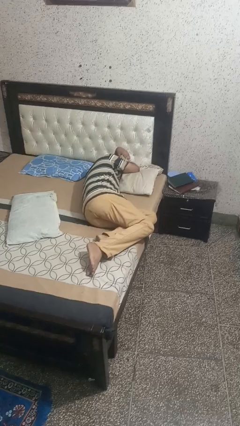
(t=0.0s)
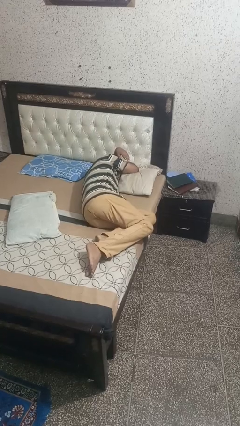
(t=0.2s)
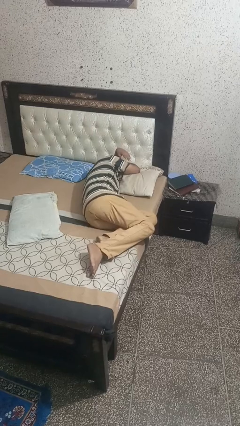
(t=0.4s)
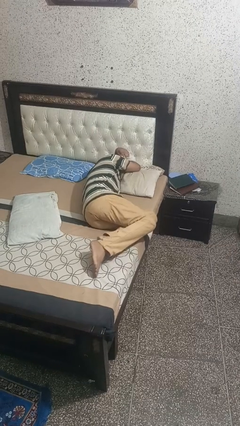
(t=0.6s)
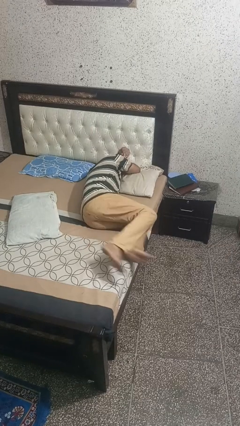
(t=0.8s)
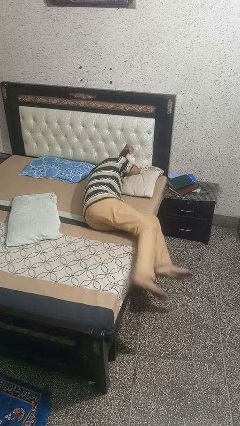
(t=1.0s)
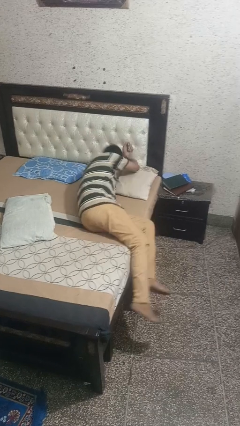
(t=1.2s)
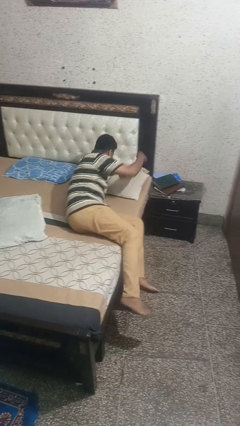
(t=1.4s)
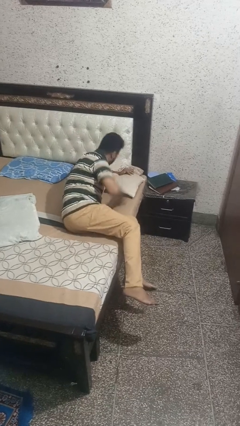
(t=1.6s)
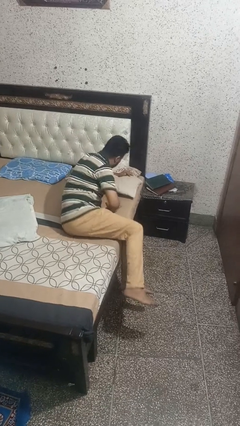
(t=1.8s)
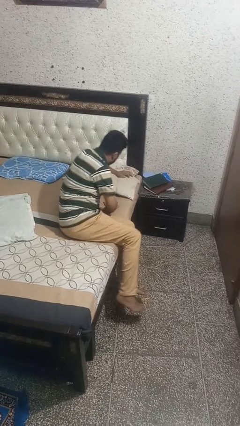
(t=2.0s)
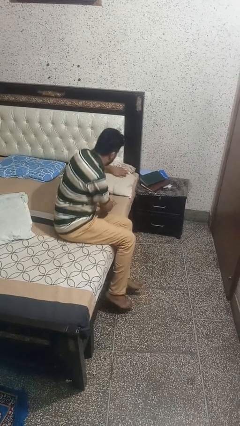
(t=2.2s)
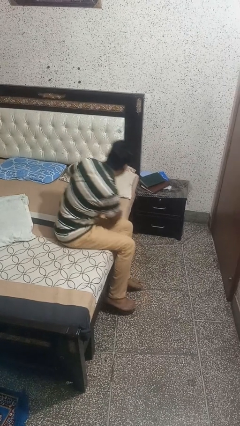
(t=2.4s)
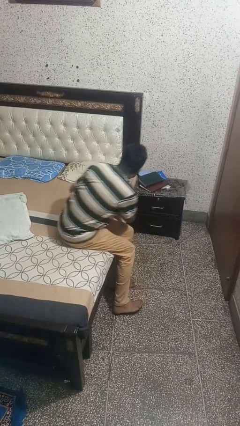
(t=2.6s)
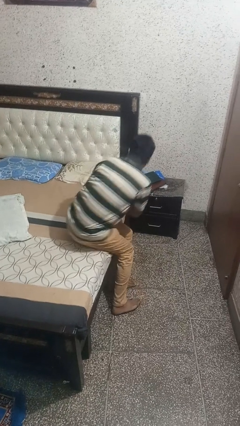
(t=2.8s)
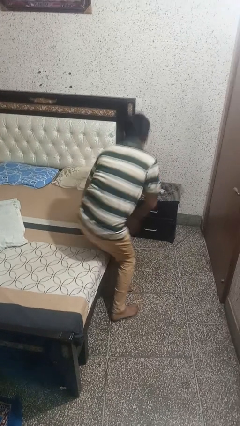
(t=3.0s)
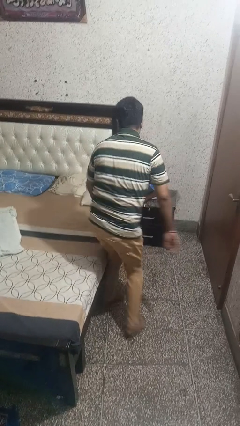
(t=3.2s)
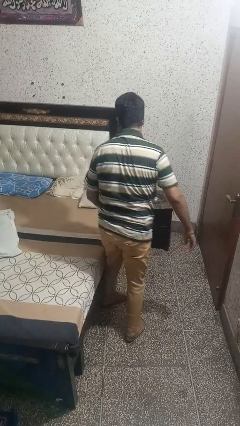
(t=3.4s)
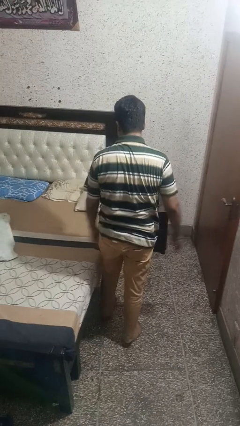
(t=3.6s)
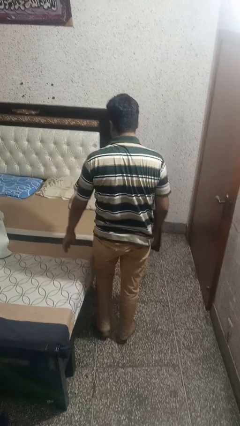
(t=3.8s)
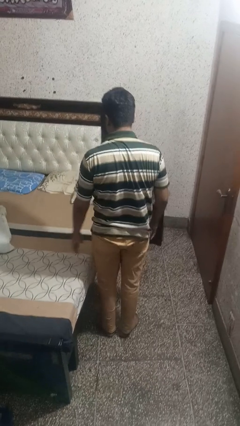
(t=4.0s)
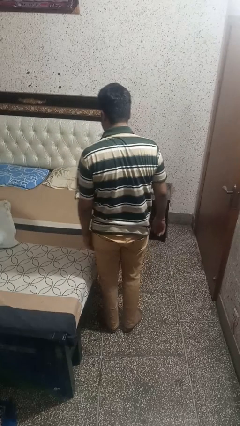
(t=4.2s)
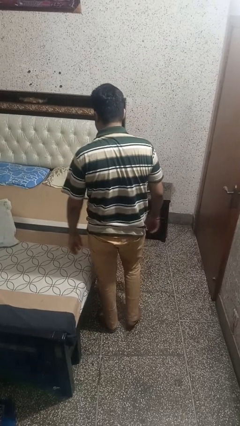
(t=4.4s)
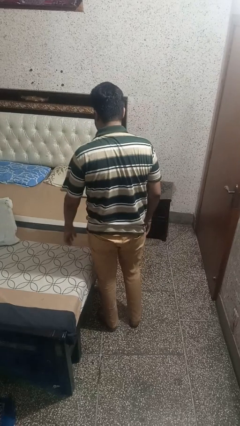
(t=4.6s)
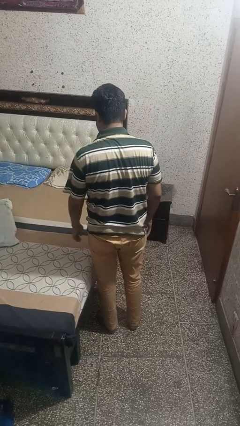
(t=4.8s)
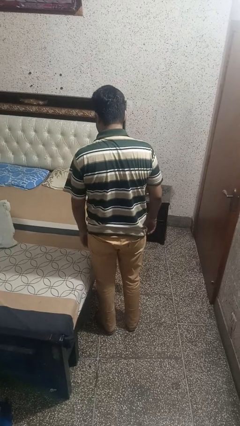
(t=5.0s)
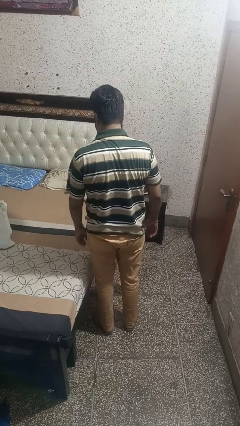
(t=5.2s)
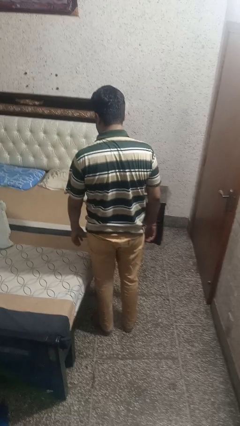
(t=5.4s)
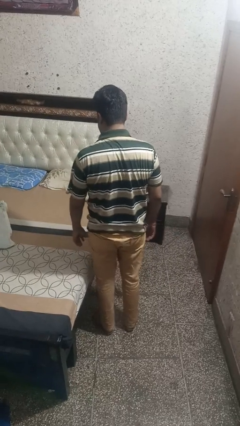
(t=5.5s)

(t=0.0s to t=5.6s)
person stands up

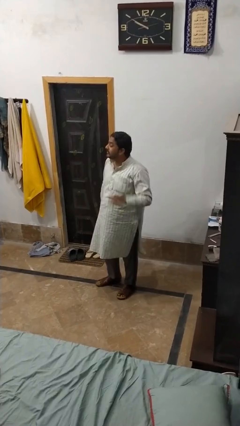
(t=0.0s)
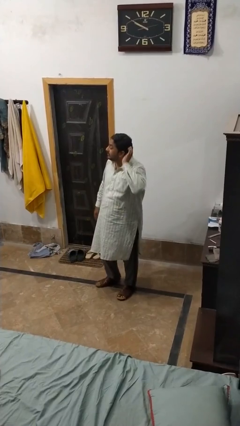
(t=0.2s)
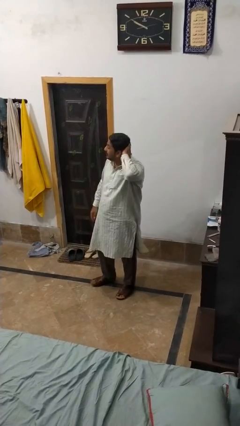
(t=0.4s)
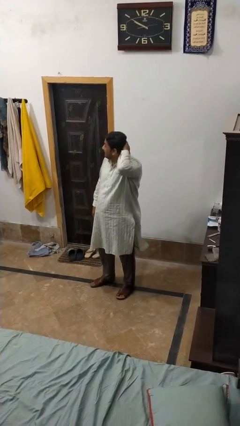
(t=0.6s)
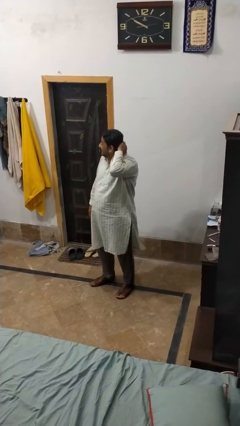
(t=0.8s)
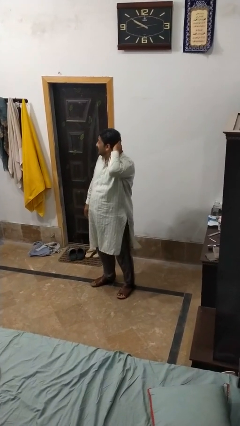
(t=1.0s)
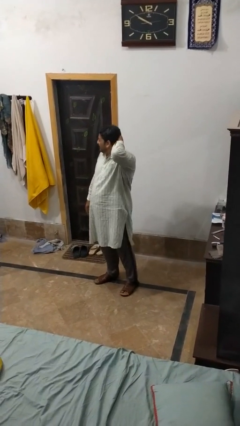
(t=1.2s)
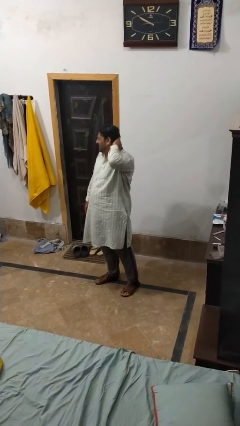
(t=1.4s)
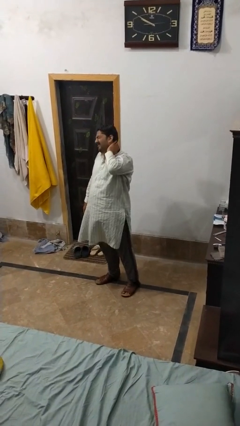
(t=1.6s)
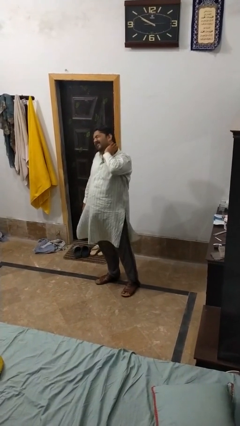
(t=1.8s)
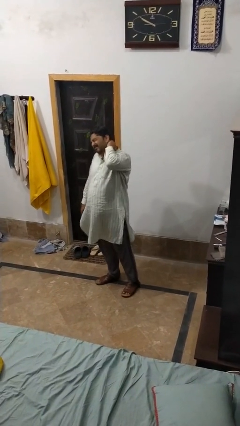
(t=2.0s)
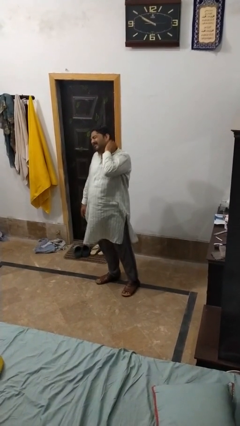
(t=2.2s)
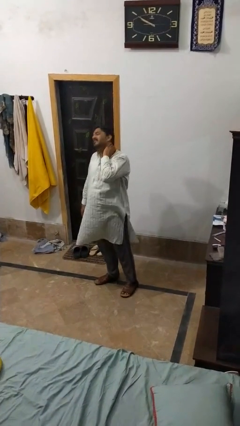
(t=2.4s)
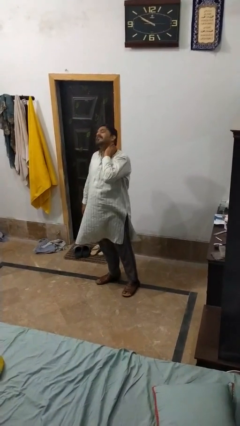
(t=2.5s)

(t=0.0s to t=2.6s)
person rubs neck

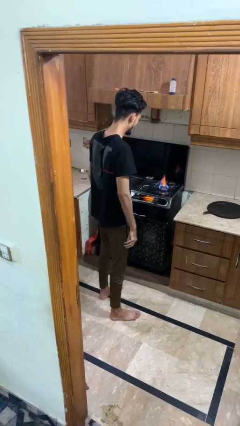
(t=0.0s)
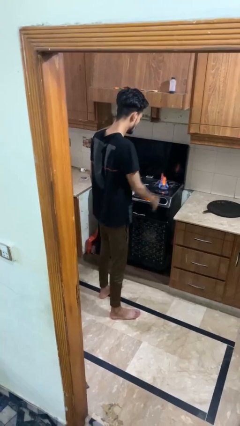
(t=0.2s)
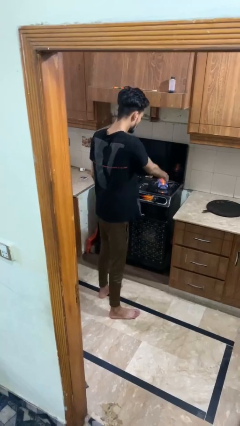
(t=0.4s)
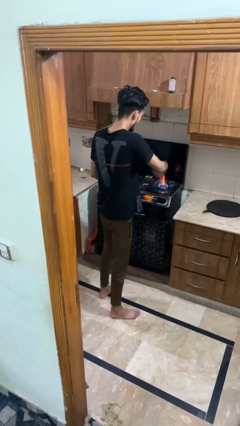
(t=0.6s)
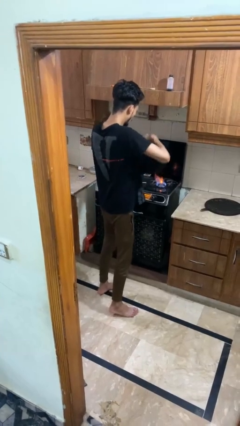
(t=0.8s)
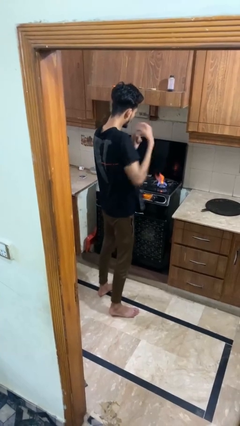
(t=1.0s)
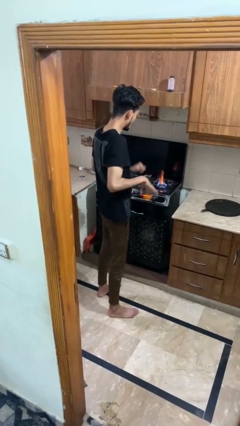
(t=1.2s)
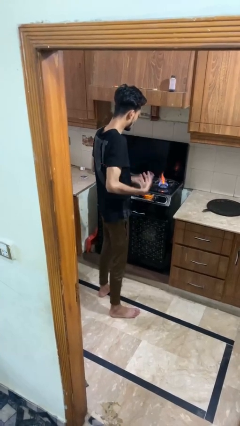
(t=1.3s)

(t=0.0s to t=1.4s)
person burns hand

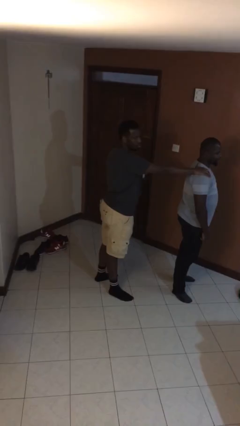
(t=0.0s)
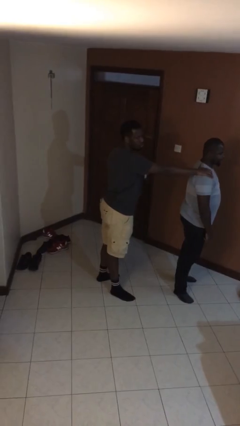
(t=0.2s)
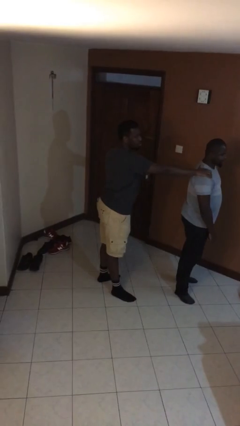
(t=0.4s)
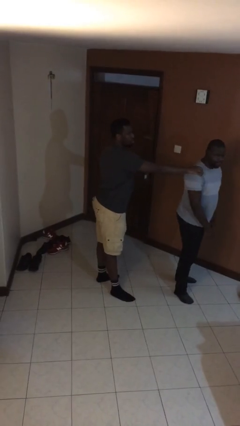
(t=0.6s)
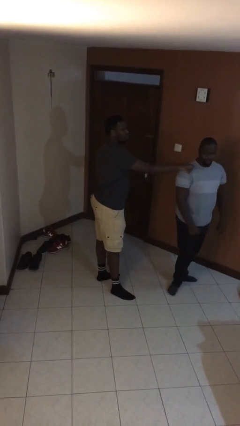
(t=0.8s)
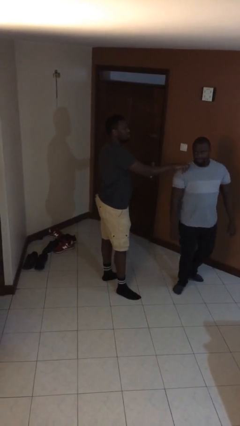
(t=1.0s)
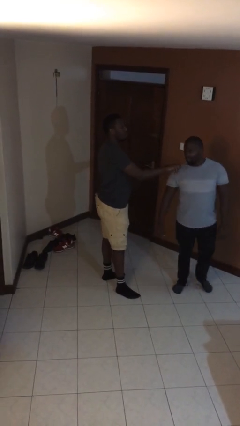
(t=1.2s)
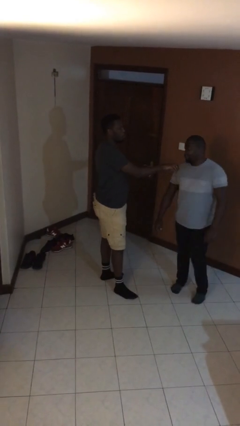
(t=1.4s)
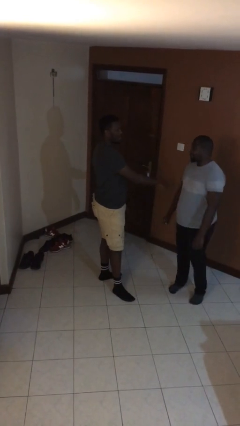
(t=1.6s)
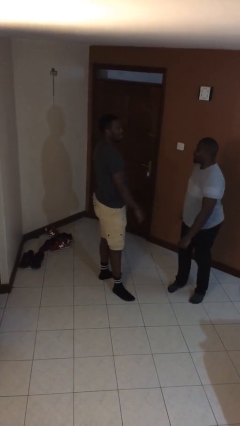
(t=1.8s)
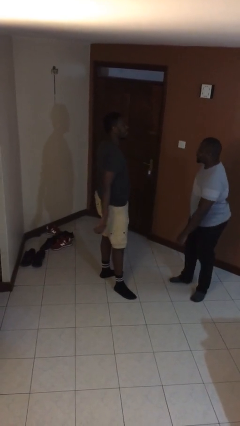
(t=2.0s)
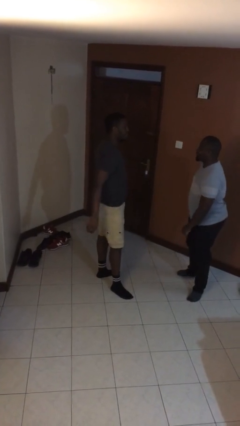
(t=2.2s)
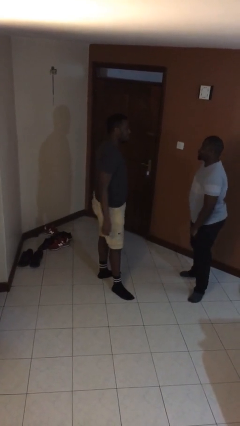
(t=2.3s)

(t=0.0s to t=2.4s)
person spins person around

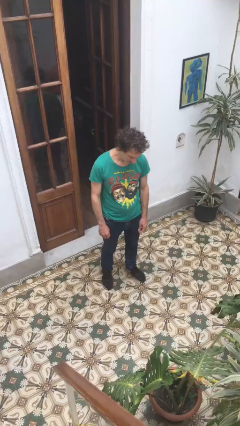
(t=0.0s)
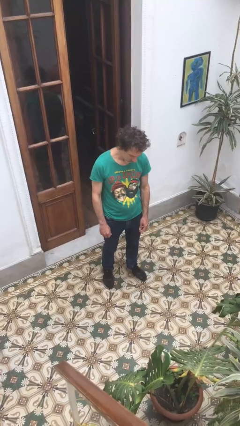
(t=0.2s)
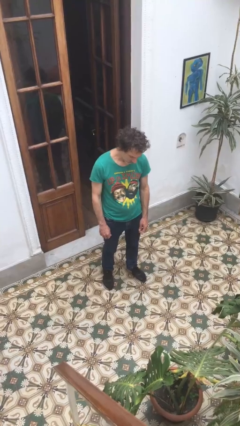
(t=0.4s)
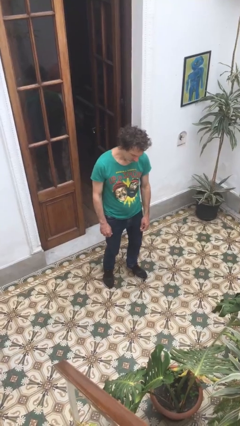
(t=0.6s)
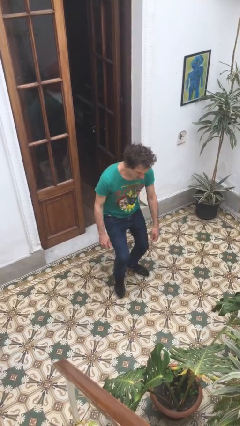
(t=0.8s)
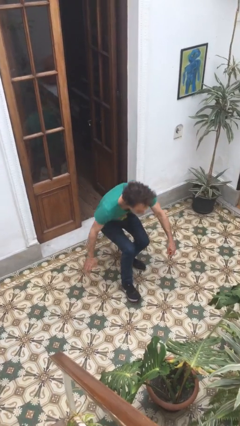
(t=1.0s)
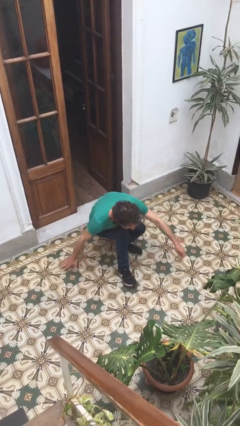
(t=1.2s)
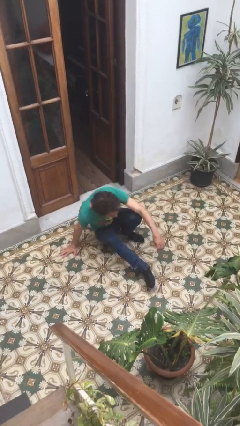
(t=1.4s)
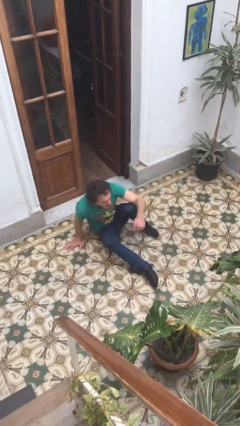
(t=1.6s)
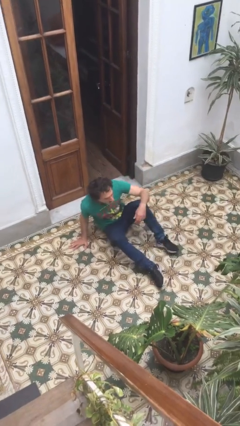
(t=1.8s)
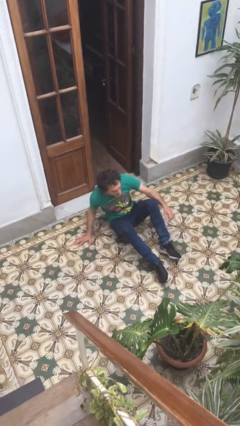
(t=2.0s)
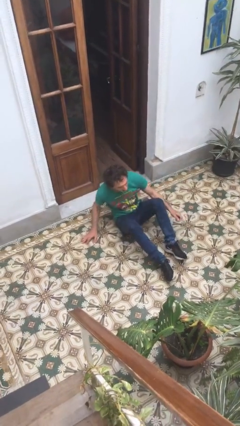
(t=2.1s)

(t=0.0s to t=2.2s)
person sits down

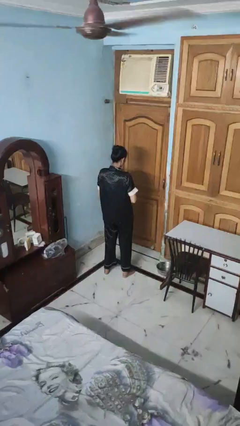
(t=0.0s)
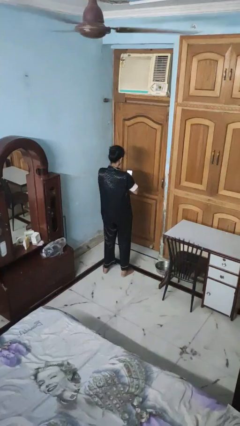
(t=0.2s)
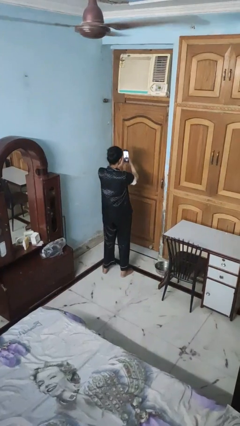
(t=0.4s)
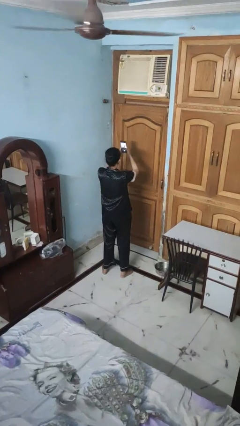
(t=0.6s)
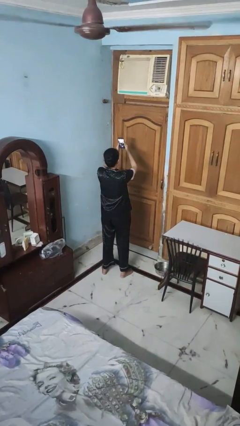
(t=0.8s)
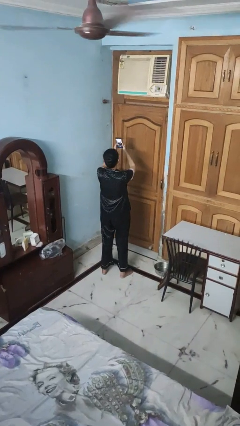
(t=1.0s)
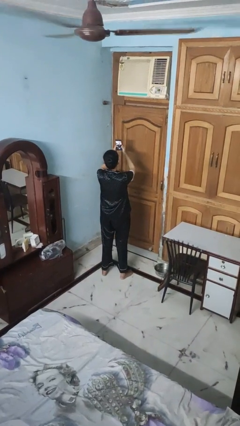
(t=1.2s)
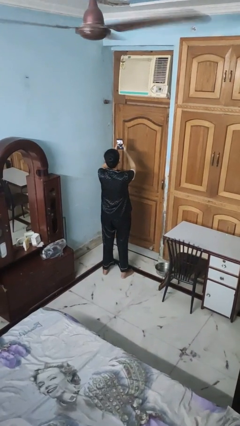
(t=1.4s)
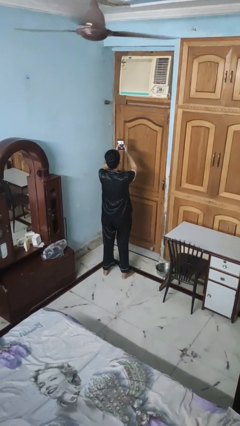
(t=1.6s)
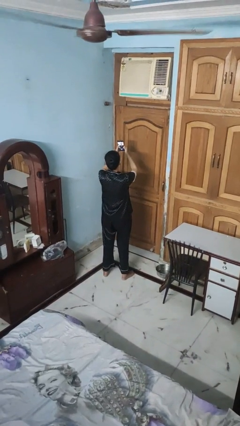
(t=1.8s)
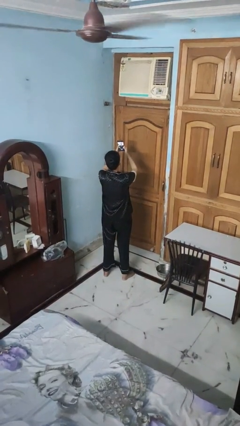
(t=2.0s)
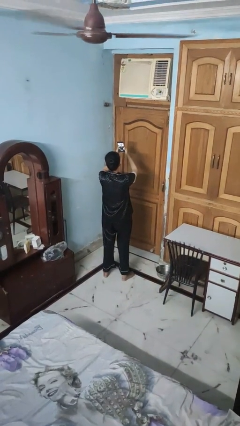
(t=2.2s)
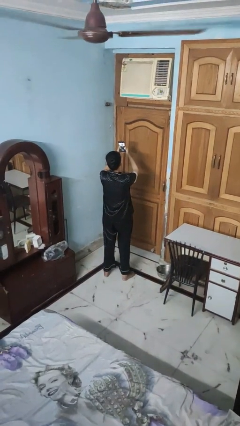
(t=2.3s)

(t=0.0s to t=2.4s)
person takes selfie

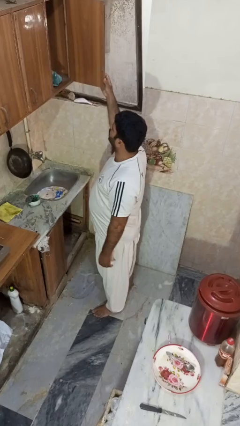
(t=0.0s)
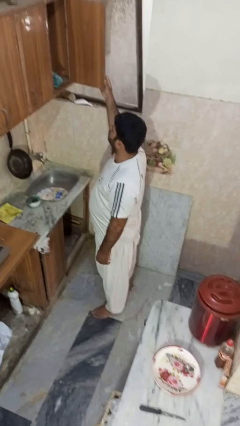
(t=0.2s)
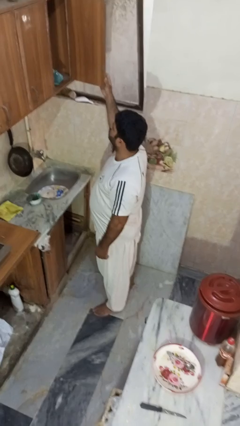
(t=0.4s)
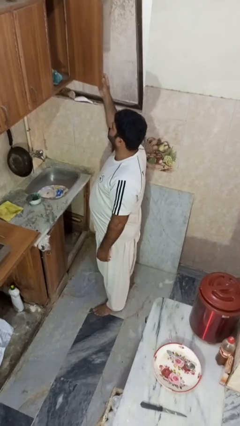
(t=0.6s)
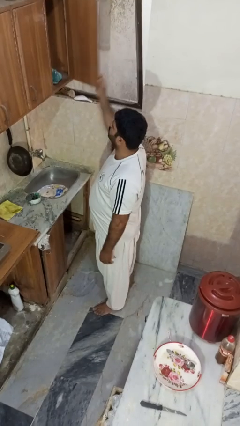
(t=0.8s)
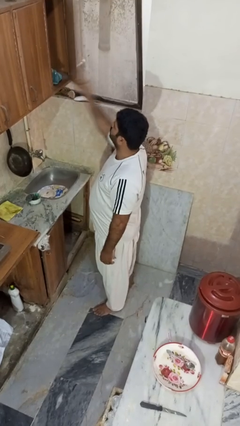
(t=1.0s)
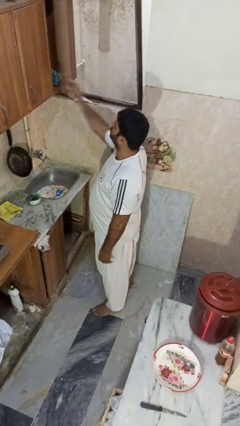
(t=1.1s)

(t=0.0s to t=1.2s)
person closes cabinet
